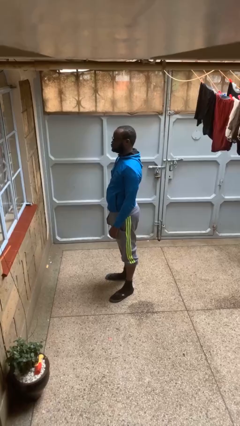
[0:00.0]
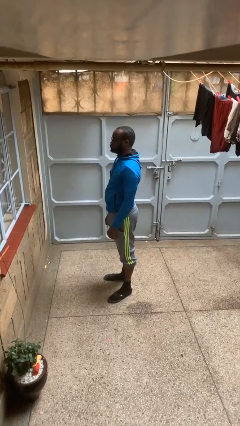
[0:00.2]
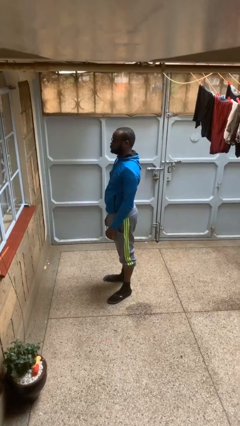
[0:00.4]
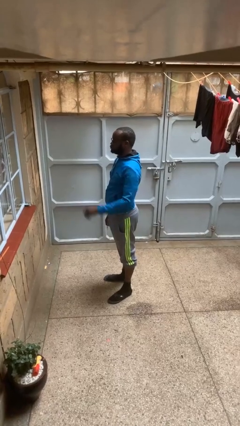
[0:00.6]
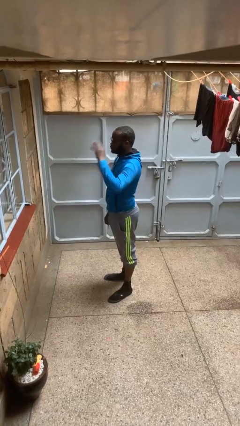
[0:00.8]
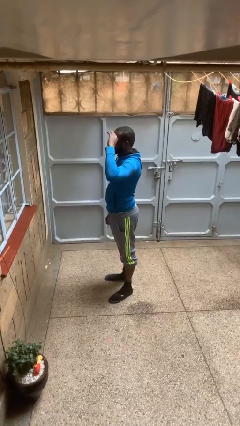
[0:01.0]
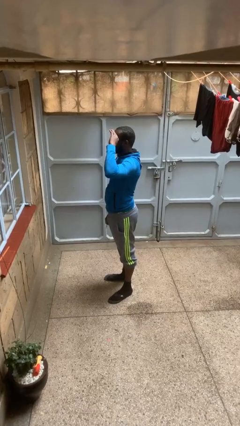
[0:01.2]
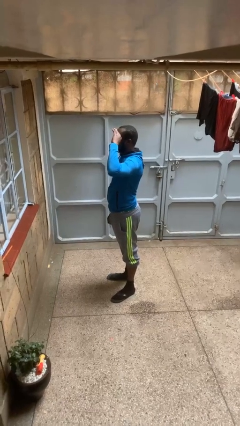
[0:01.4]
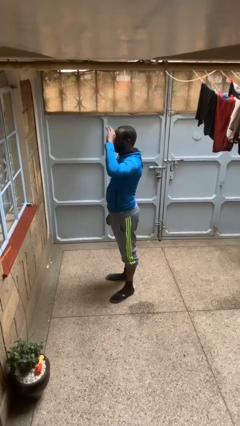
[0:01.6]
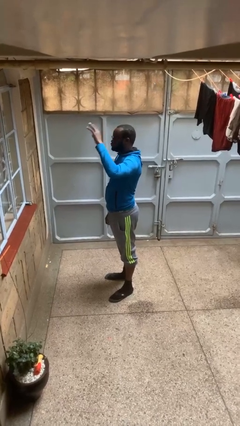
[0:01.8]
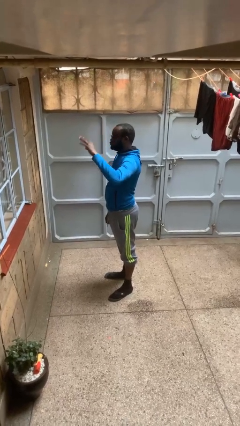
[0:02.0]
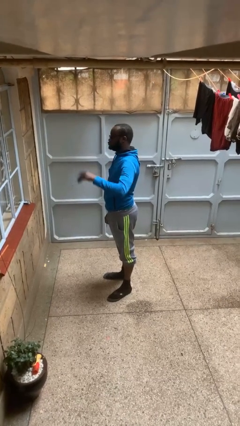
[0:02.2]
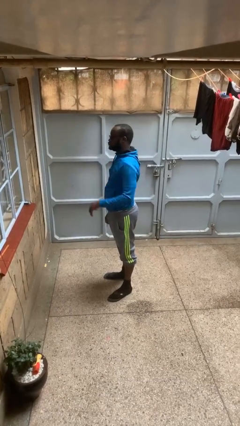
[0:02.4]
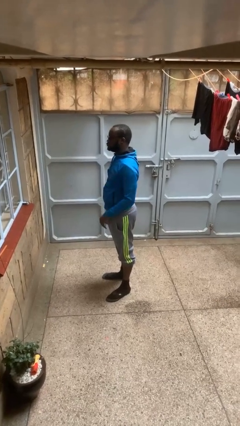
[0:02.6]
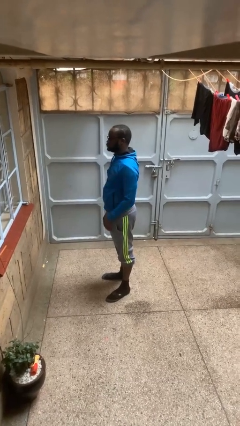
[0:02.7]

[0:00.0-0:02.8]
person salutes

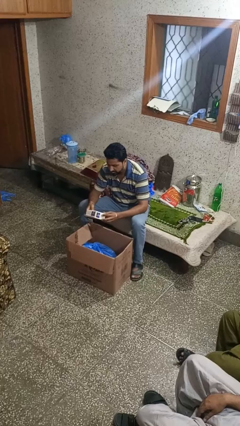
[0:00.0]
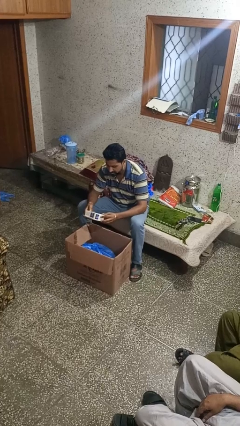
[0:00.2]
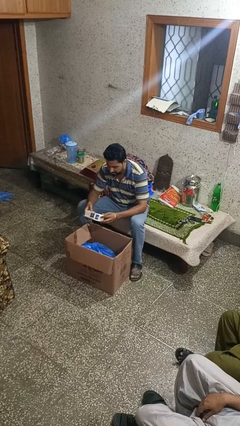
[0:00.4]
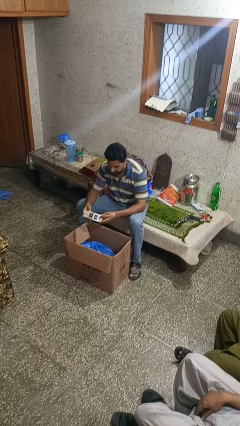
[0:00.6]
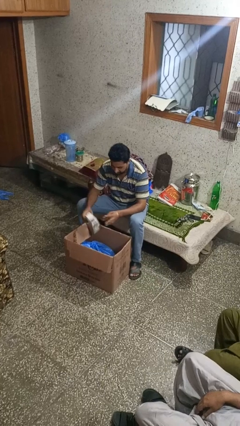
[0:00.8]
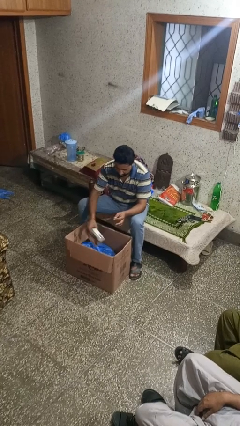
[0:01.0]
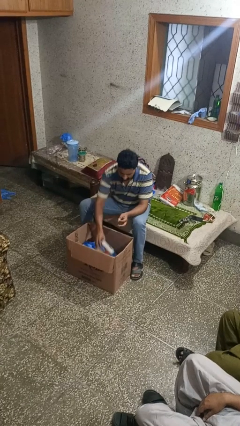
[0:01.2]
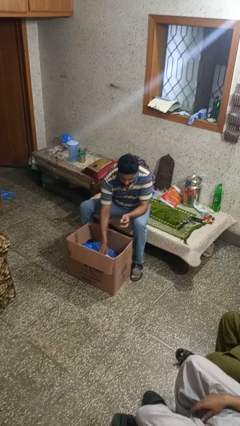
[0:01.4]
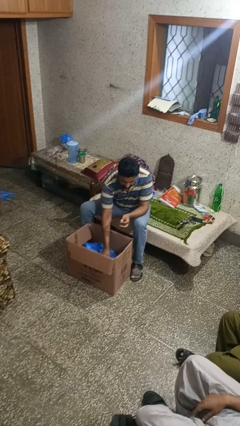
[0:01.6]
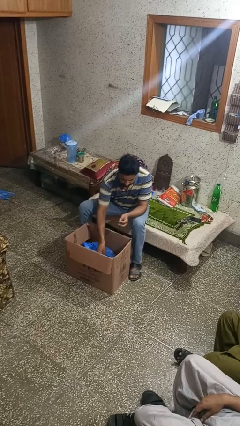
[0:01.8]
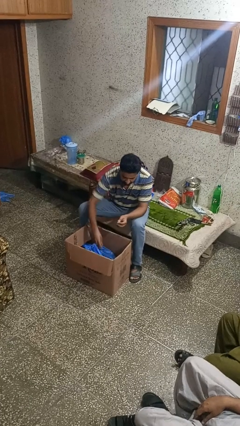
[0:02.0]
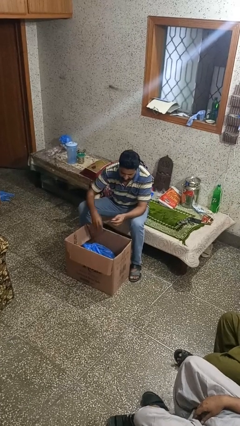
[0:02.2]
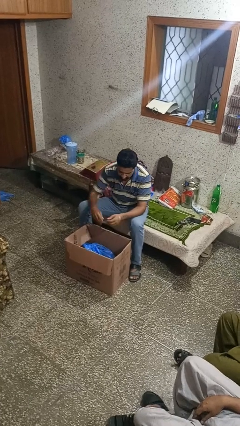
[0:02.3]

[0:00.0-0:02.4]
person puts object into box

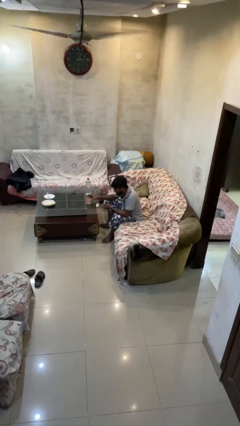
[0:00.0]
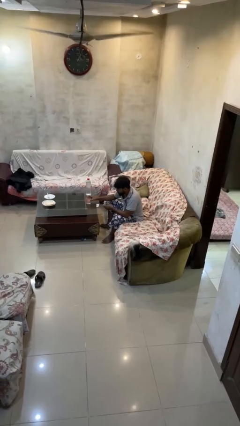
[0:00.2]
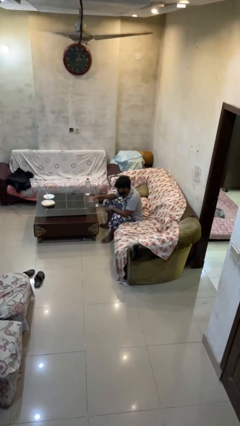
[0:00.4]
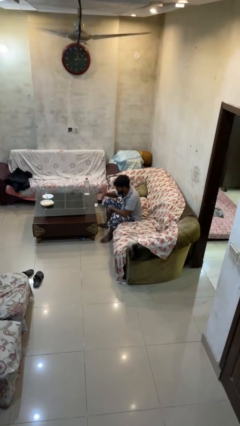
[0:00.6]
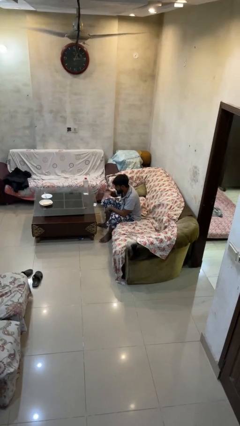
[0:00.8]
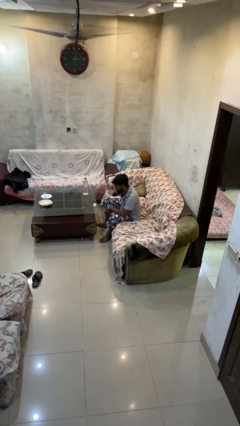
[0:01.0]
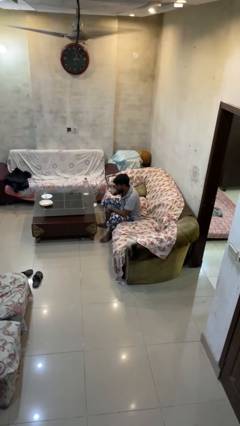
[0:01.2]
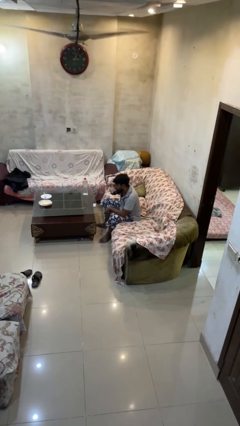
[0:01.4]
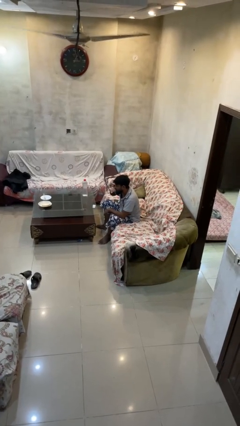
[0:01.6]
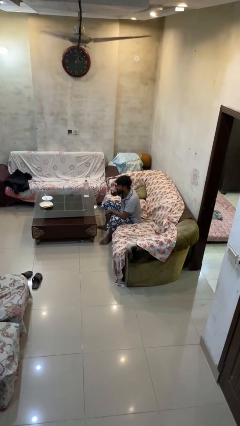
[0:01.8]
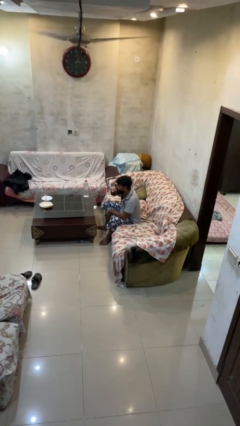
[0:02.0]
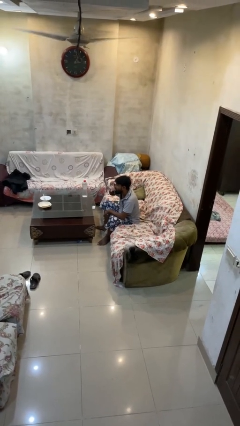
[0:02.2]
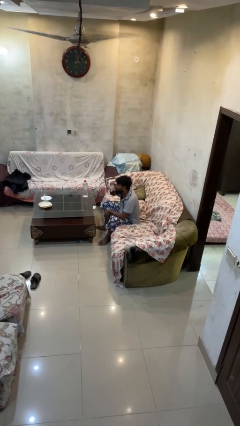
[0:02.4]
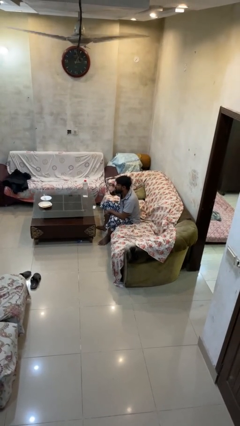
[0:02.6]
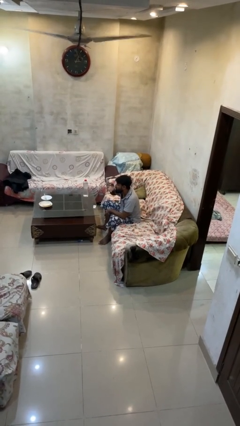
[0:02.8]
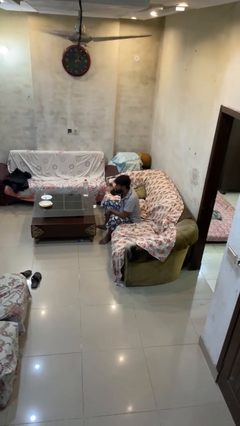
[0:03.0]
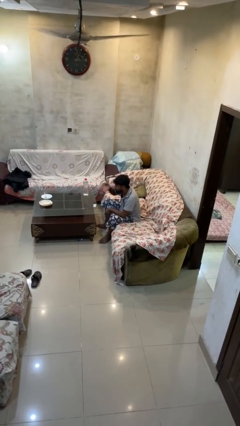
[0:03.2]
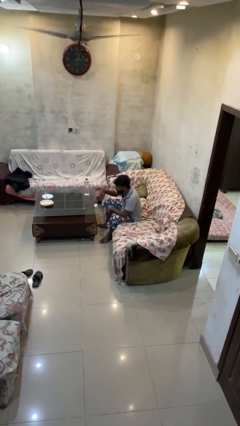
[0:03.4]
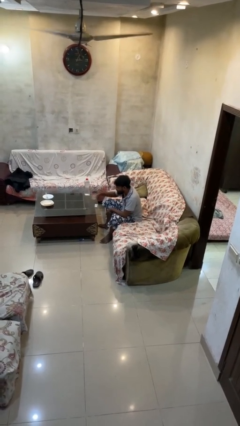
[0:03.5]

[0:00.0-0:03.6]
person drinks from cup

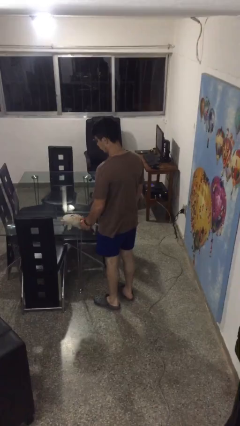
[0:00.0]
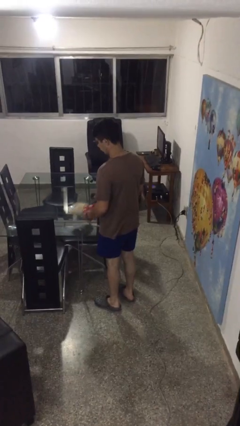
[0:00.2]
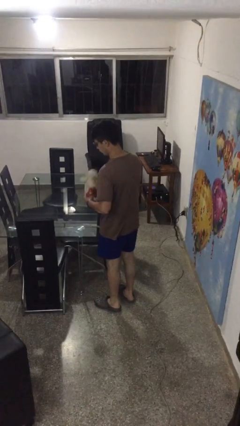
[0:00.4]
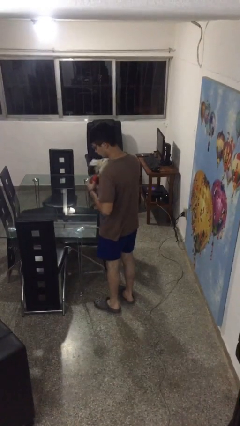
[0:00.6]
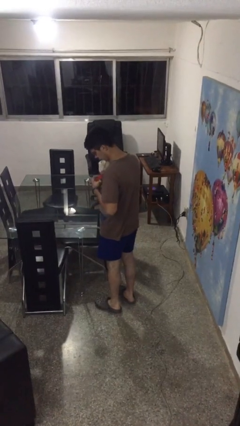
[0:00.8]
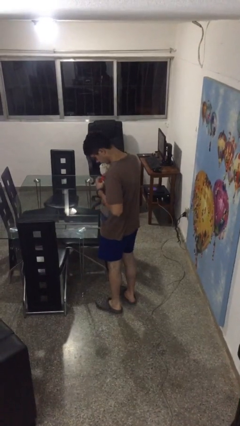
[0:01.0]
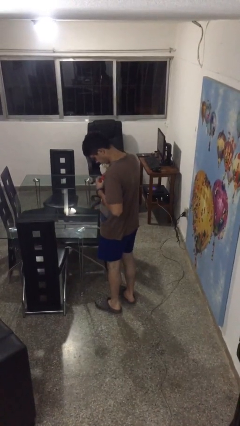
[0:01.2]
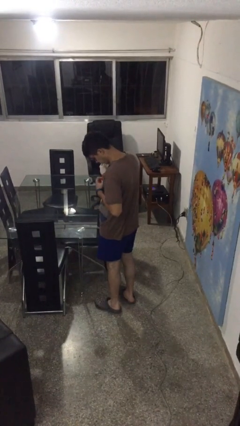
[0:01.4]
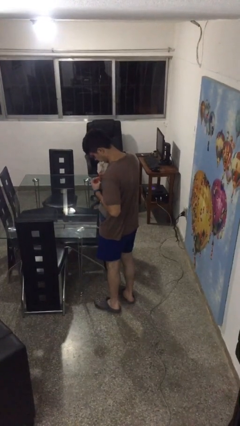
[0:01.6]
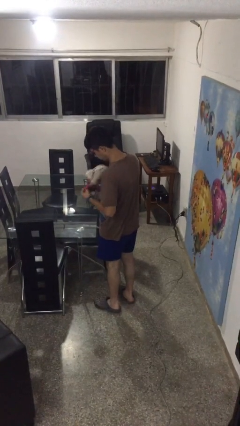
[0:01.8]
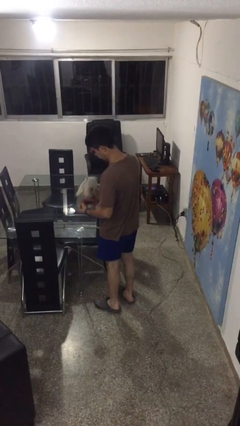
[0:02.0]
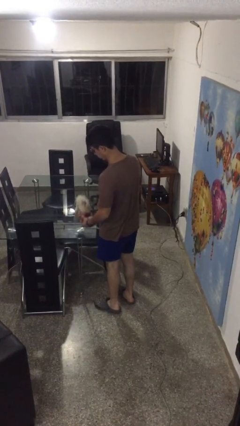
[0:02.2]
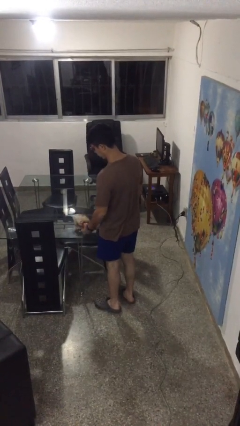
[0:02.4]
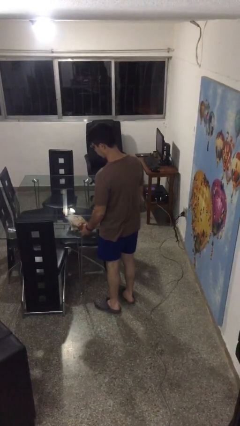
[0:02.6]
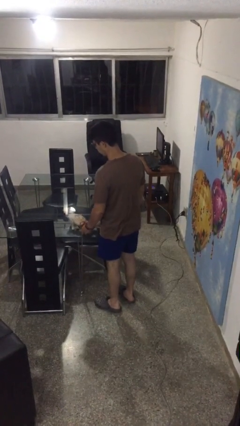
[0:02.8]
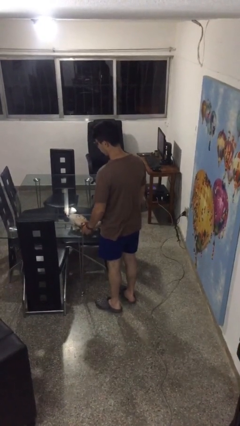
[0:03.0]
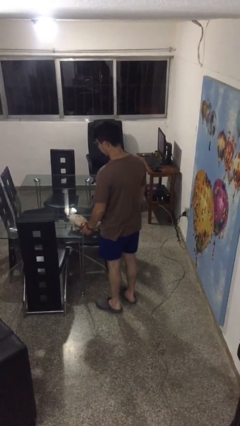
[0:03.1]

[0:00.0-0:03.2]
person hugs stuffed animal

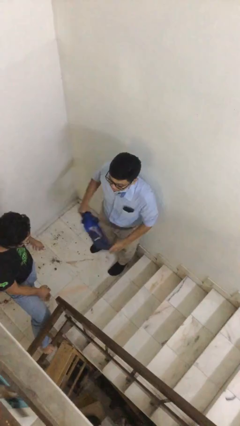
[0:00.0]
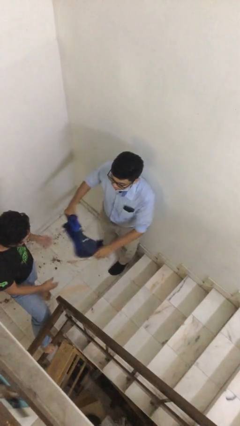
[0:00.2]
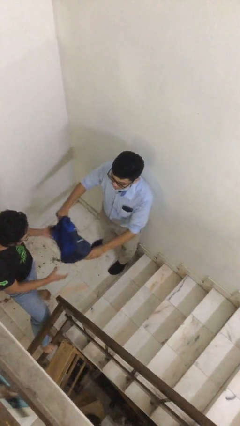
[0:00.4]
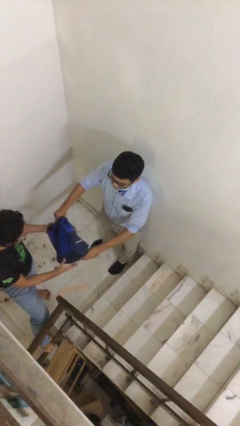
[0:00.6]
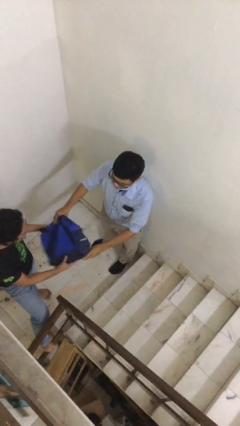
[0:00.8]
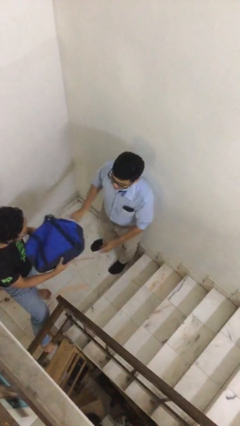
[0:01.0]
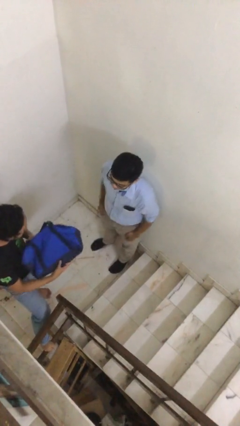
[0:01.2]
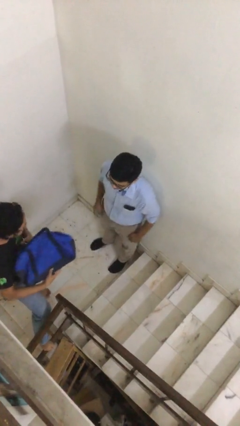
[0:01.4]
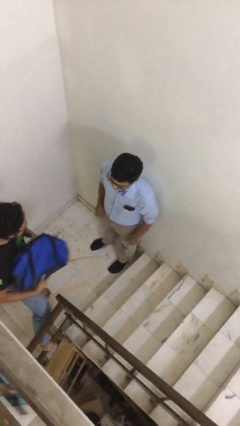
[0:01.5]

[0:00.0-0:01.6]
person transfers object to person

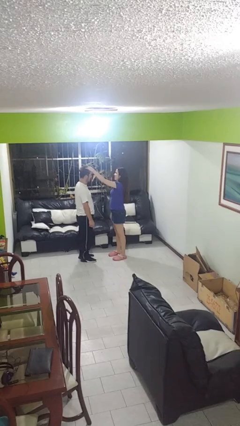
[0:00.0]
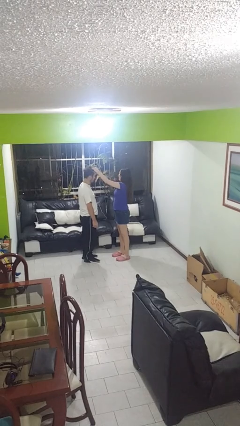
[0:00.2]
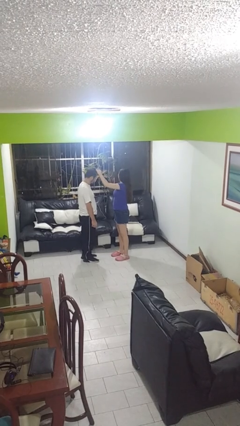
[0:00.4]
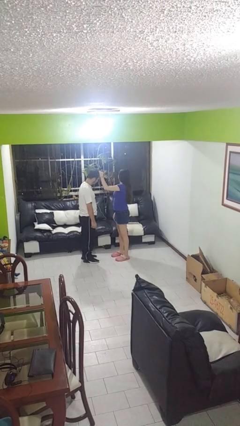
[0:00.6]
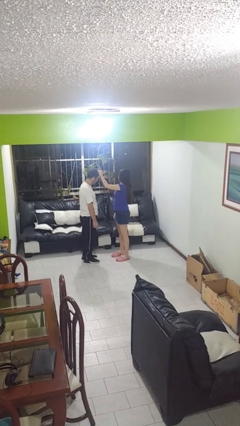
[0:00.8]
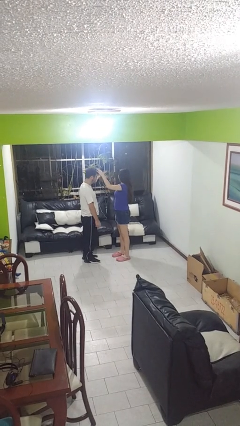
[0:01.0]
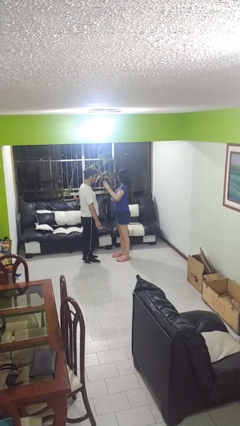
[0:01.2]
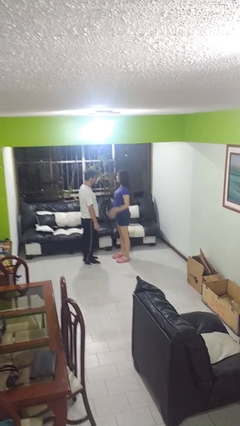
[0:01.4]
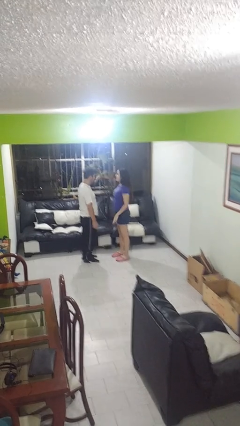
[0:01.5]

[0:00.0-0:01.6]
person grabs person by hair

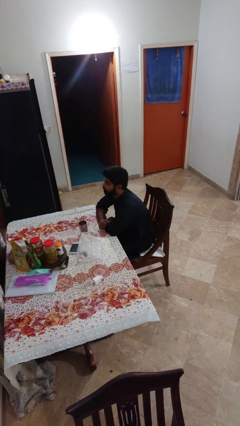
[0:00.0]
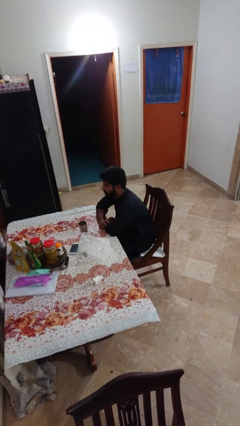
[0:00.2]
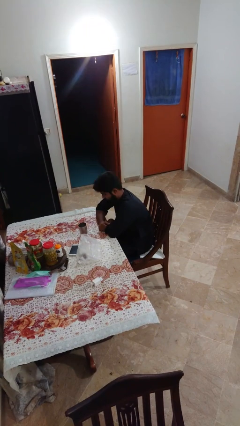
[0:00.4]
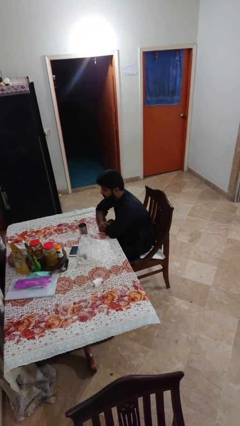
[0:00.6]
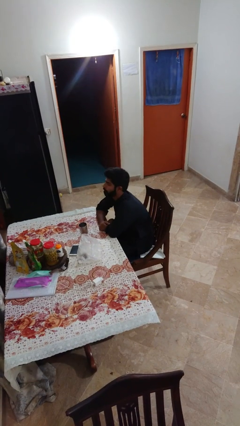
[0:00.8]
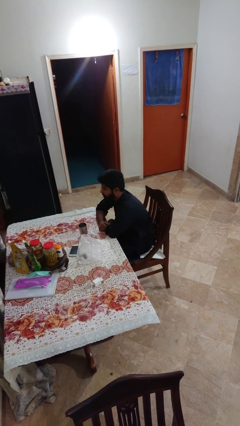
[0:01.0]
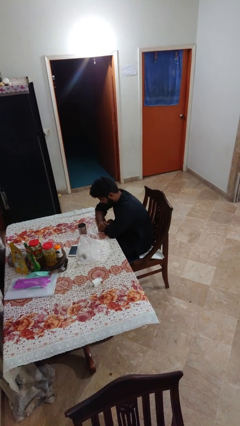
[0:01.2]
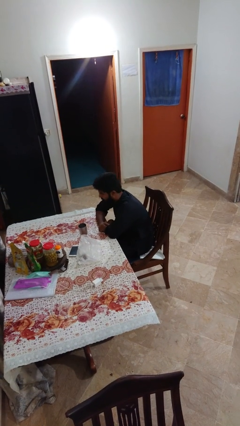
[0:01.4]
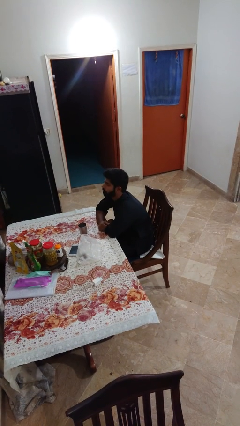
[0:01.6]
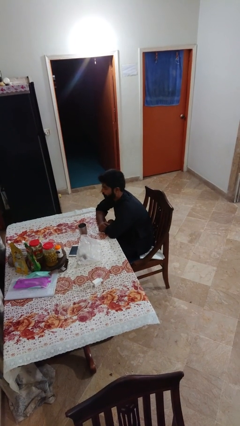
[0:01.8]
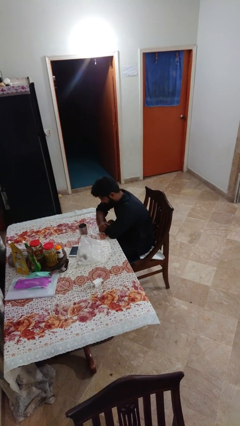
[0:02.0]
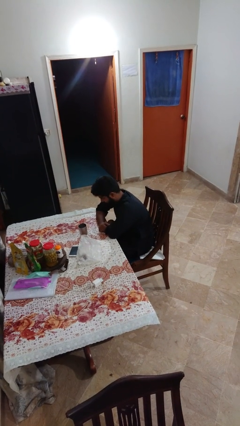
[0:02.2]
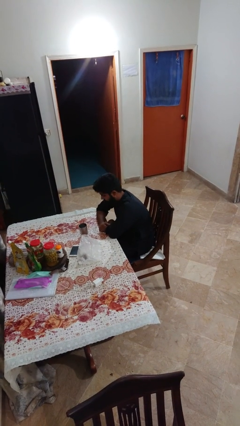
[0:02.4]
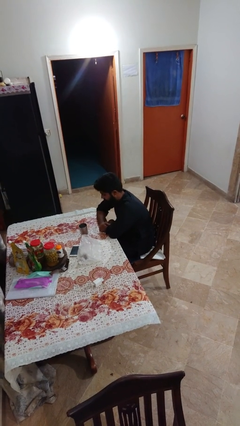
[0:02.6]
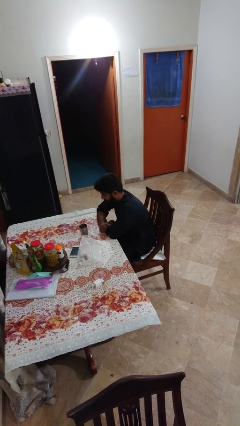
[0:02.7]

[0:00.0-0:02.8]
person nods head
